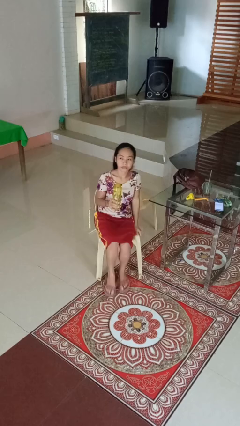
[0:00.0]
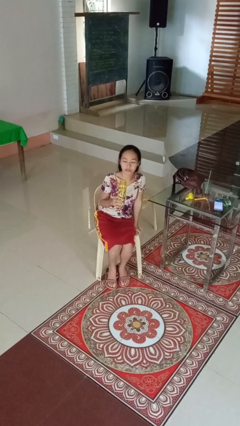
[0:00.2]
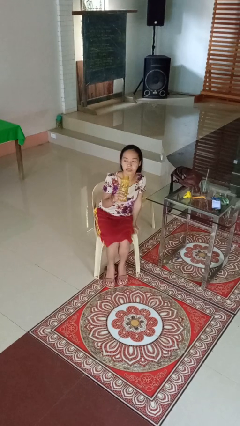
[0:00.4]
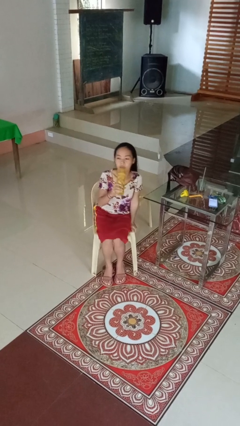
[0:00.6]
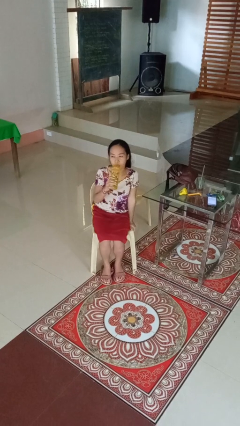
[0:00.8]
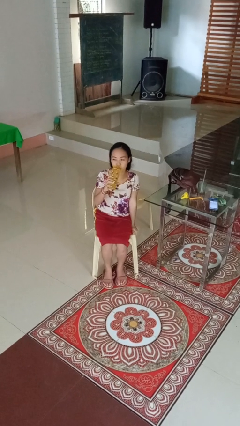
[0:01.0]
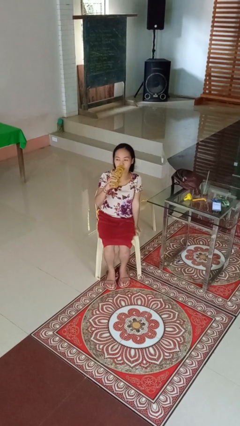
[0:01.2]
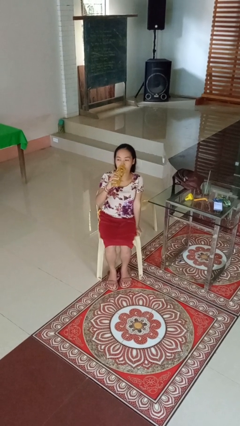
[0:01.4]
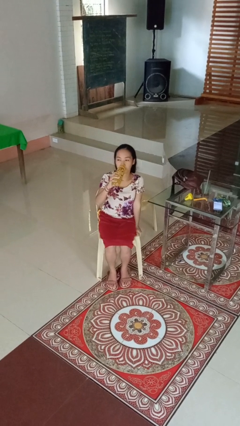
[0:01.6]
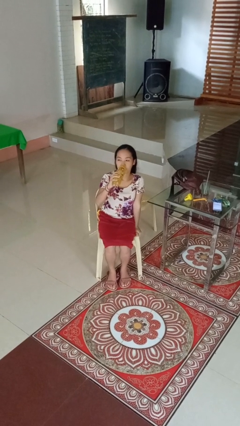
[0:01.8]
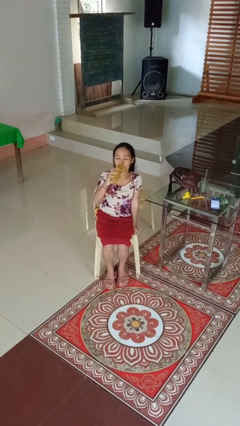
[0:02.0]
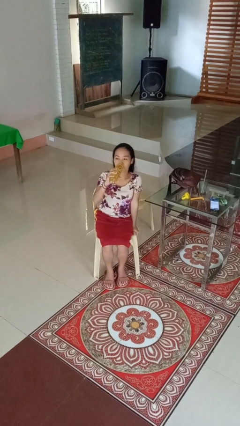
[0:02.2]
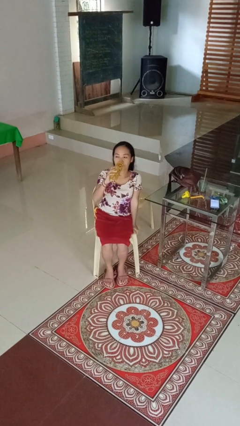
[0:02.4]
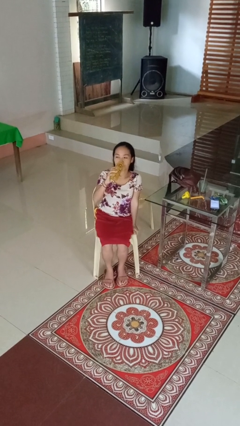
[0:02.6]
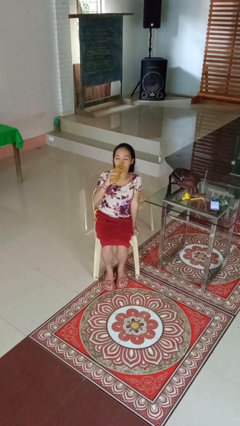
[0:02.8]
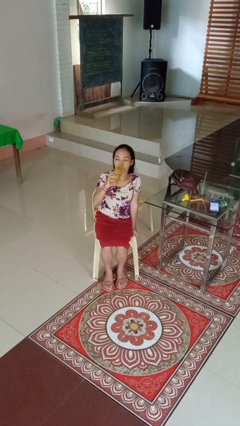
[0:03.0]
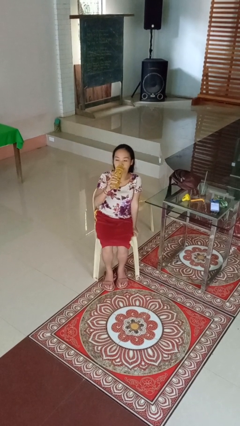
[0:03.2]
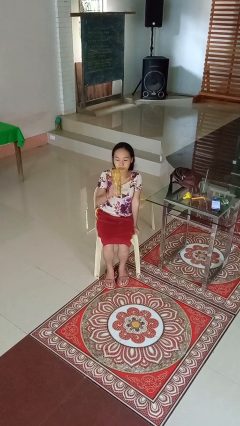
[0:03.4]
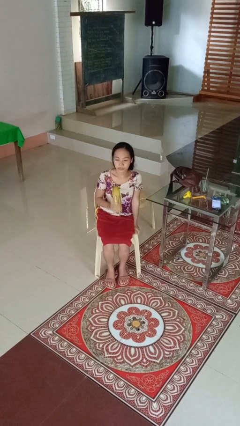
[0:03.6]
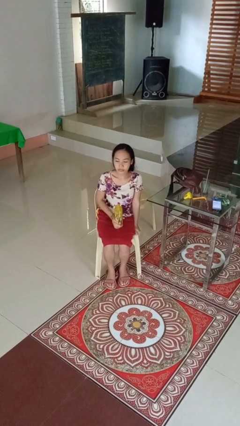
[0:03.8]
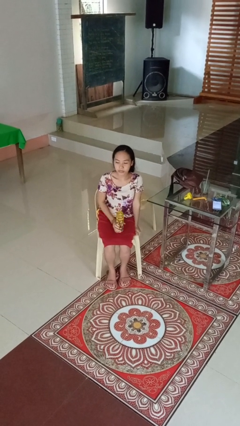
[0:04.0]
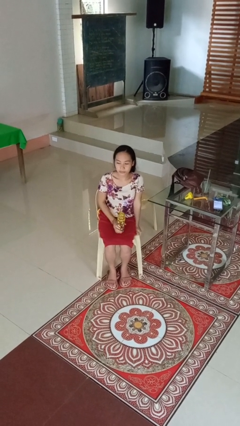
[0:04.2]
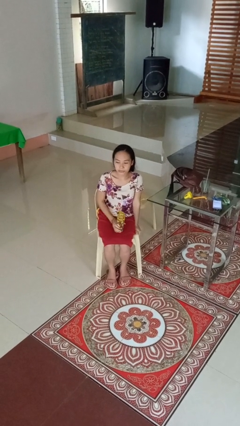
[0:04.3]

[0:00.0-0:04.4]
person drinks from bottle

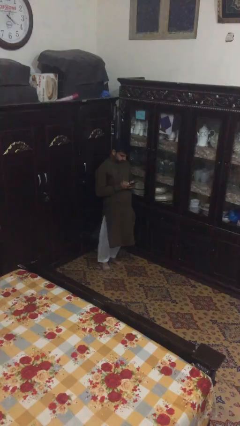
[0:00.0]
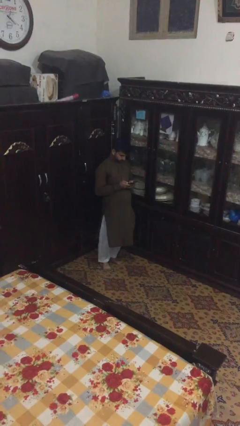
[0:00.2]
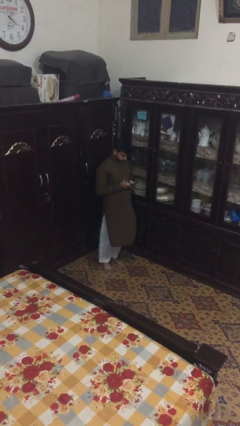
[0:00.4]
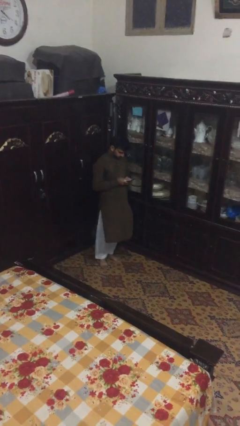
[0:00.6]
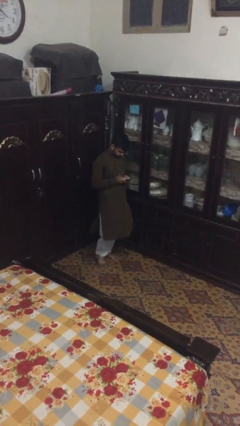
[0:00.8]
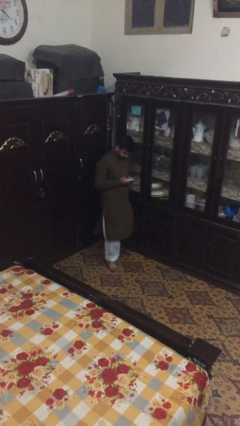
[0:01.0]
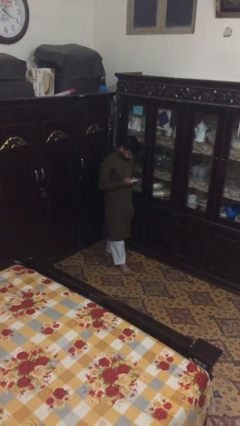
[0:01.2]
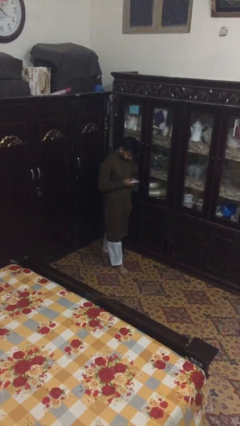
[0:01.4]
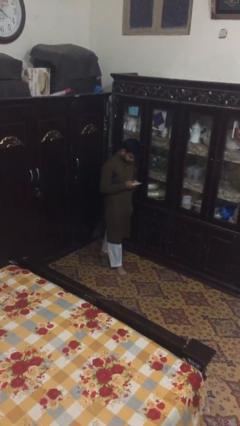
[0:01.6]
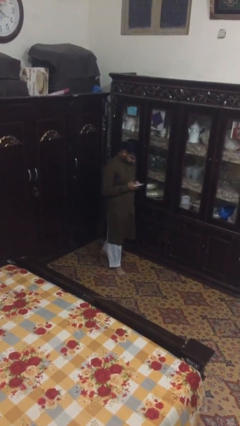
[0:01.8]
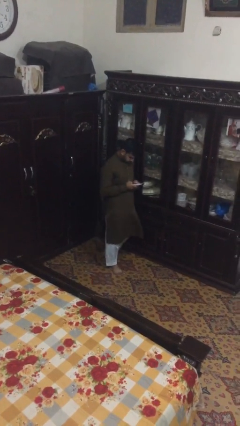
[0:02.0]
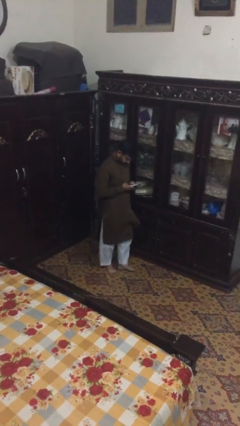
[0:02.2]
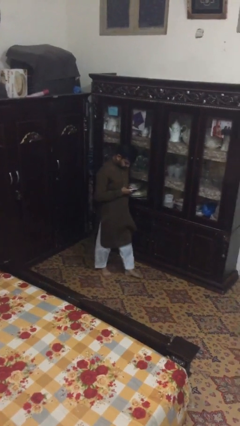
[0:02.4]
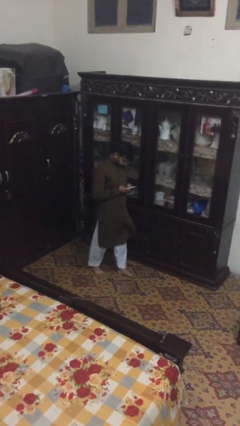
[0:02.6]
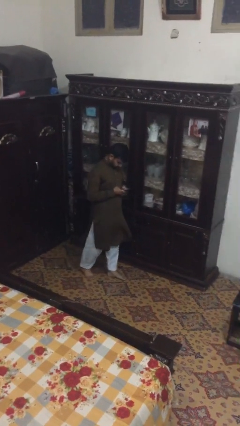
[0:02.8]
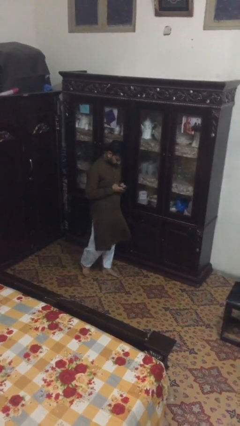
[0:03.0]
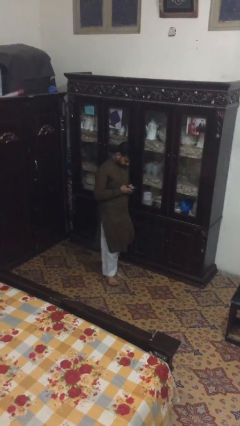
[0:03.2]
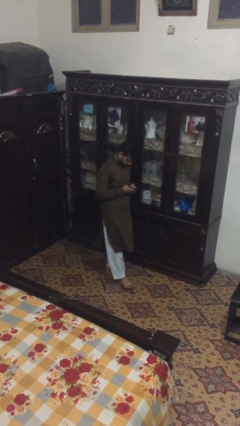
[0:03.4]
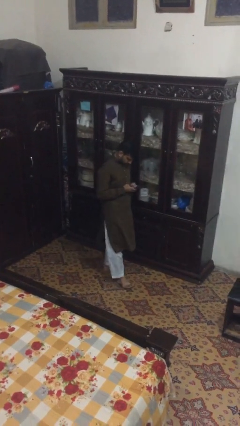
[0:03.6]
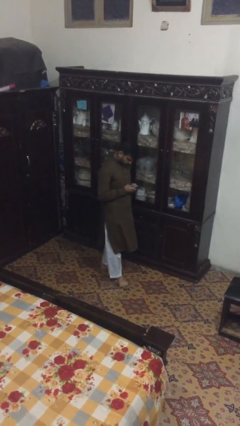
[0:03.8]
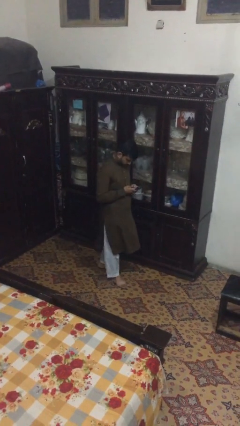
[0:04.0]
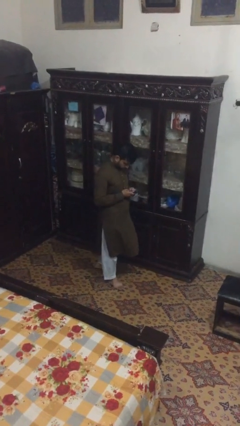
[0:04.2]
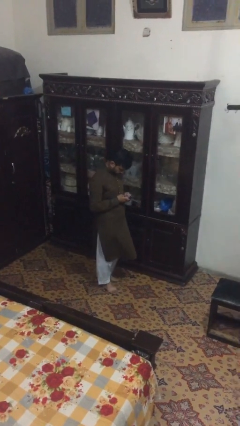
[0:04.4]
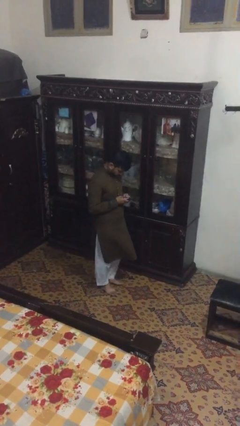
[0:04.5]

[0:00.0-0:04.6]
person texts on phone

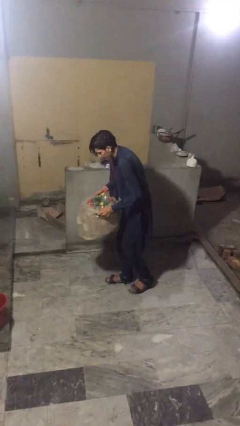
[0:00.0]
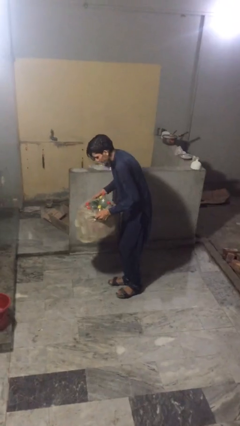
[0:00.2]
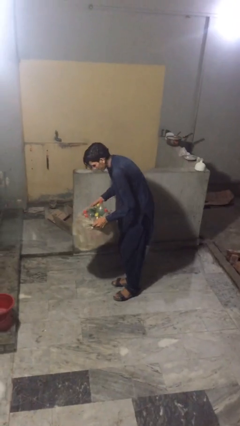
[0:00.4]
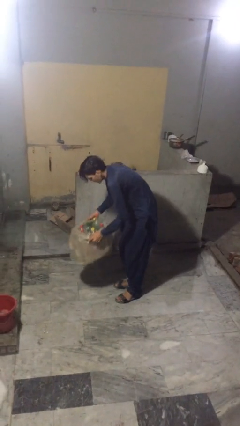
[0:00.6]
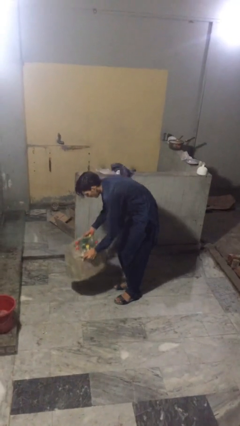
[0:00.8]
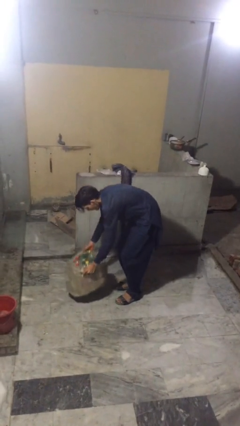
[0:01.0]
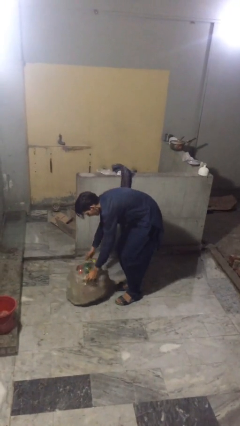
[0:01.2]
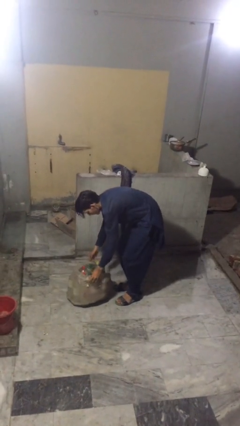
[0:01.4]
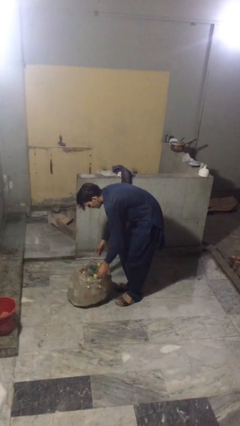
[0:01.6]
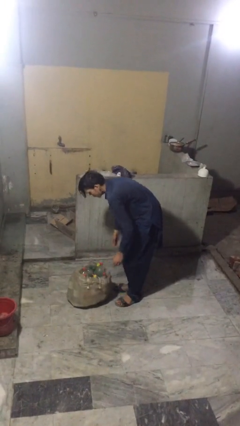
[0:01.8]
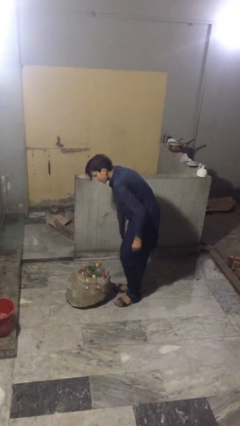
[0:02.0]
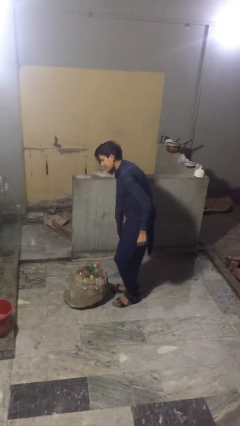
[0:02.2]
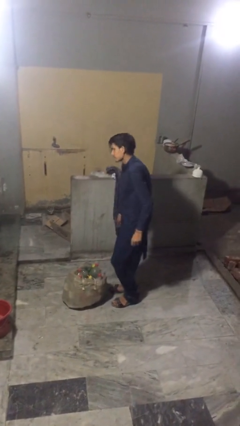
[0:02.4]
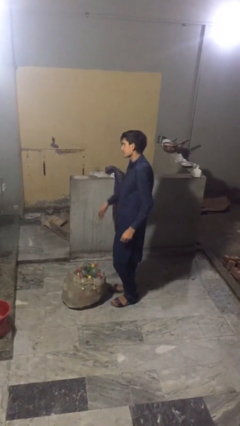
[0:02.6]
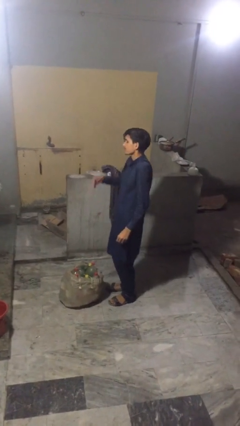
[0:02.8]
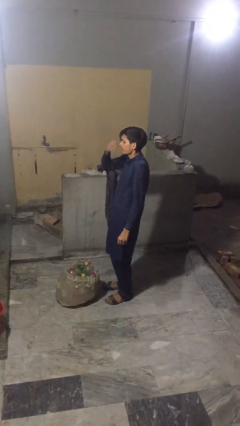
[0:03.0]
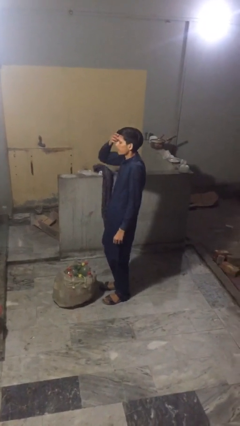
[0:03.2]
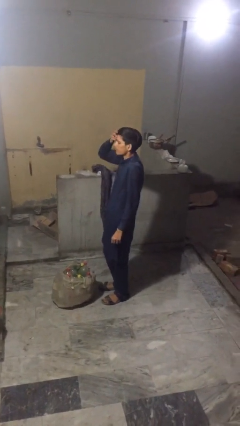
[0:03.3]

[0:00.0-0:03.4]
person puts down object on floor

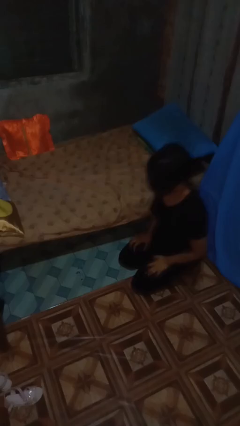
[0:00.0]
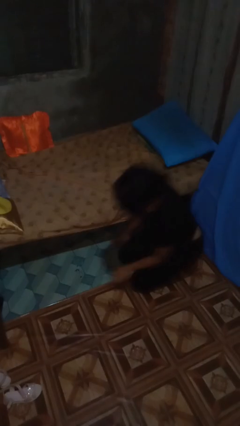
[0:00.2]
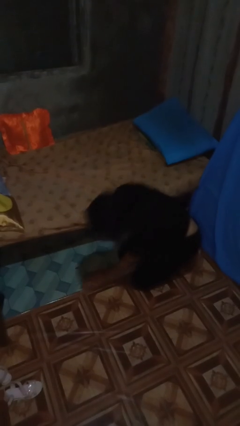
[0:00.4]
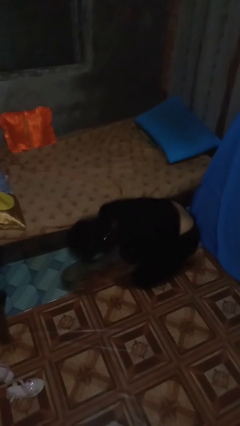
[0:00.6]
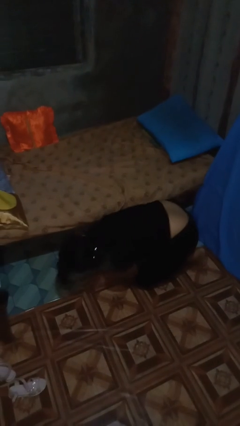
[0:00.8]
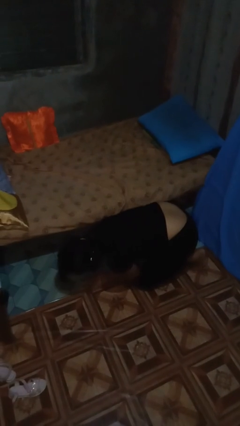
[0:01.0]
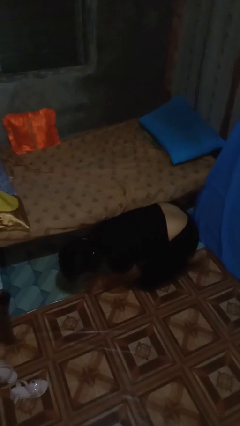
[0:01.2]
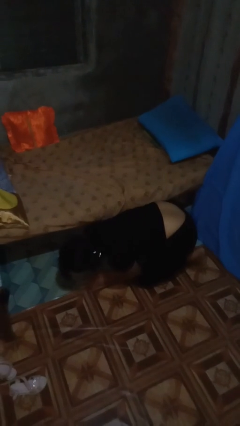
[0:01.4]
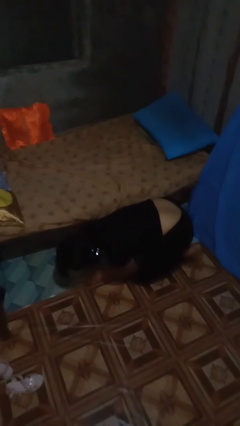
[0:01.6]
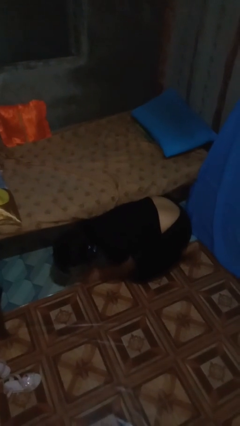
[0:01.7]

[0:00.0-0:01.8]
person searches under bed

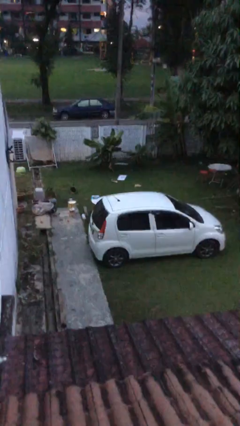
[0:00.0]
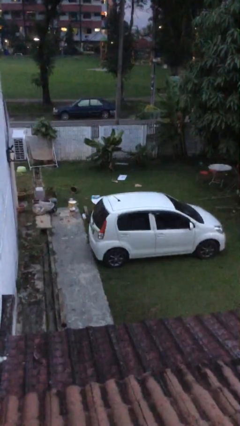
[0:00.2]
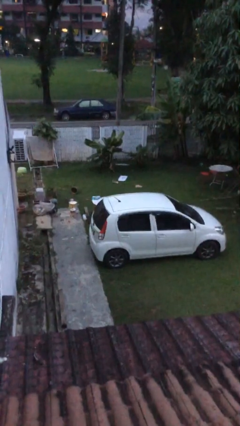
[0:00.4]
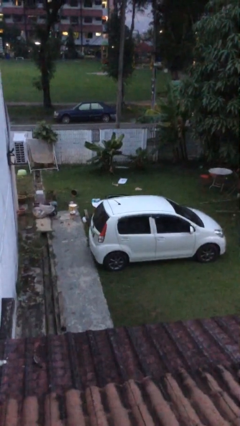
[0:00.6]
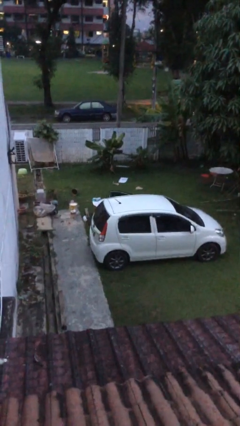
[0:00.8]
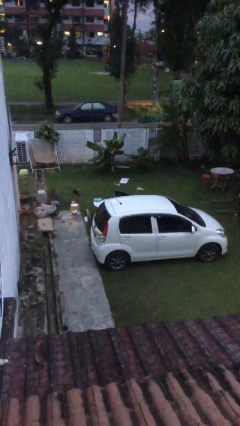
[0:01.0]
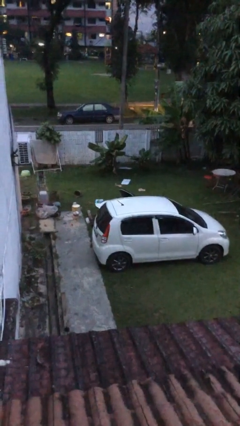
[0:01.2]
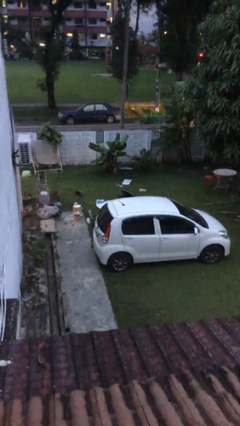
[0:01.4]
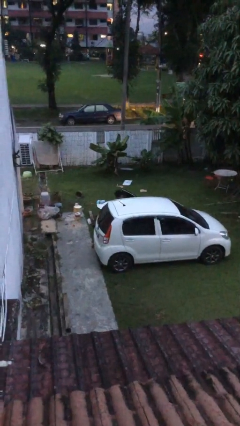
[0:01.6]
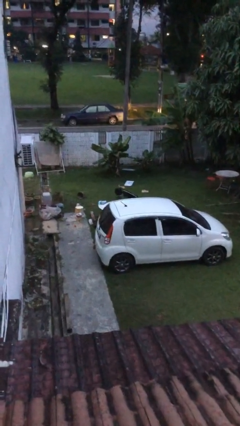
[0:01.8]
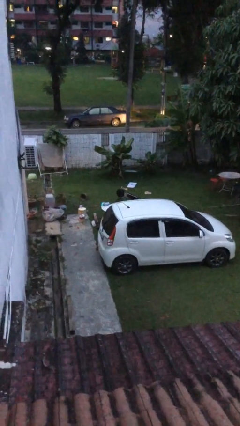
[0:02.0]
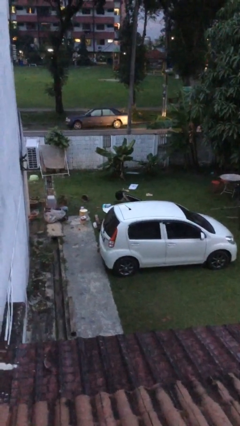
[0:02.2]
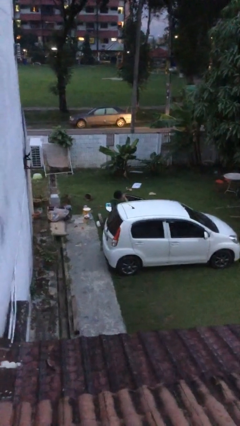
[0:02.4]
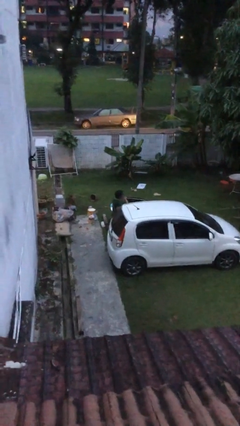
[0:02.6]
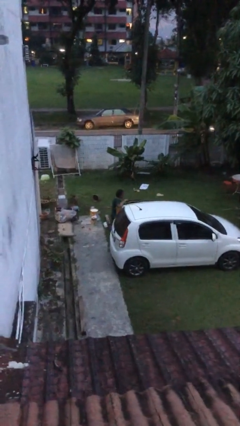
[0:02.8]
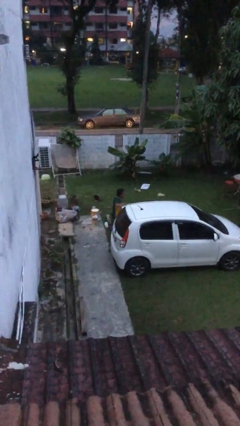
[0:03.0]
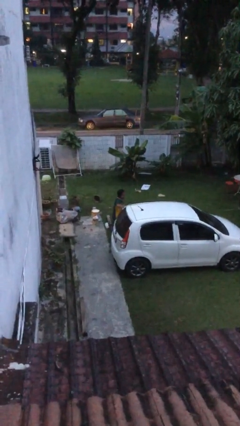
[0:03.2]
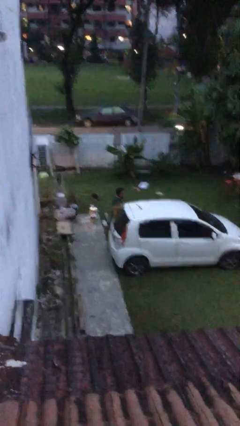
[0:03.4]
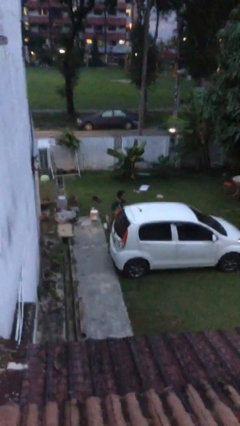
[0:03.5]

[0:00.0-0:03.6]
car drops off person
